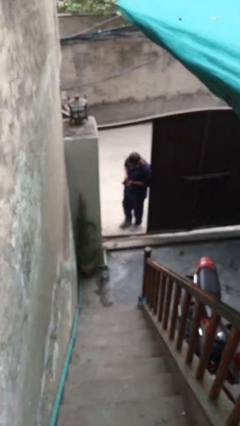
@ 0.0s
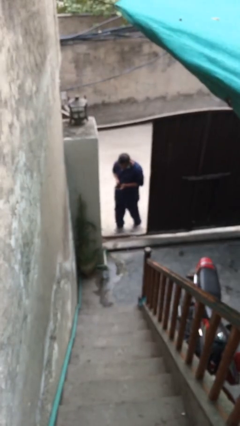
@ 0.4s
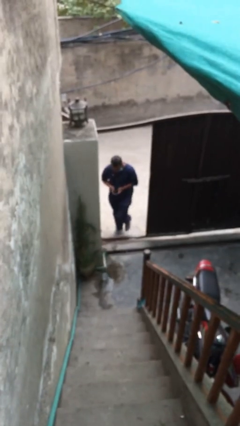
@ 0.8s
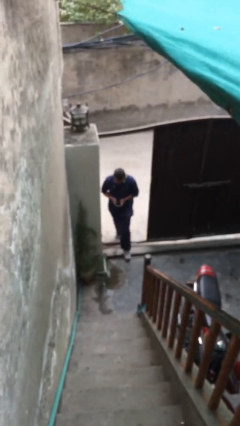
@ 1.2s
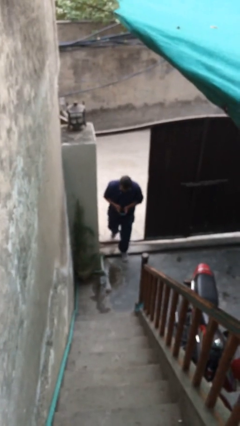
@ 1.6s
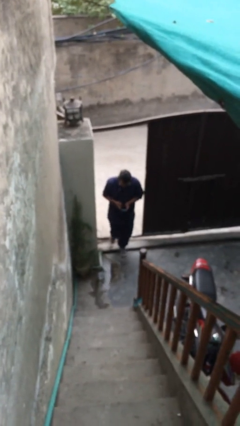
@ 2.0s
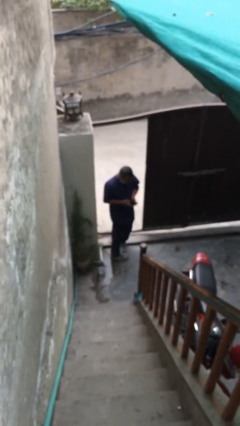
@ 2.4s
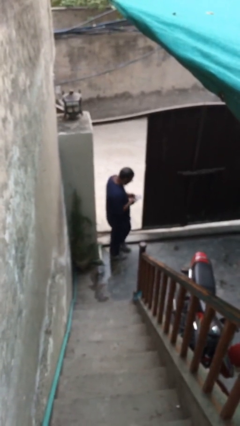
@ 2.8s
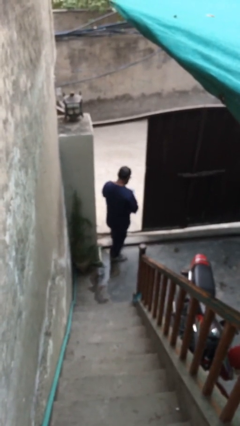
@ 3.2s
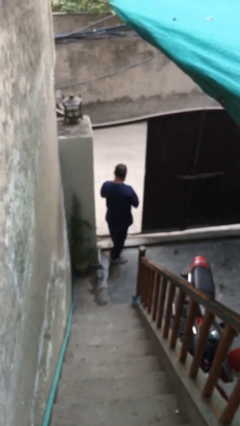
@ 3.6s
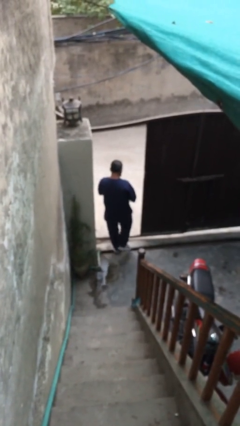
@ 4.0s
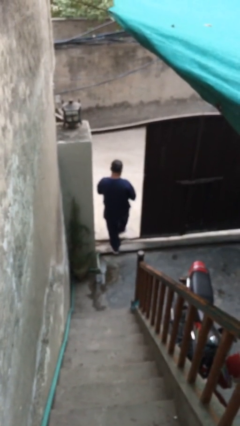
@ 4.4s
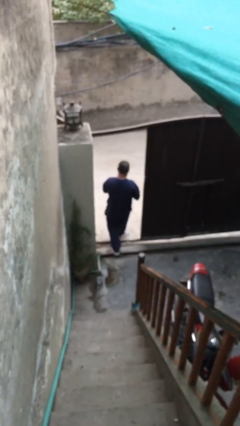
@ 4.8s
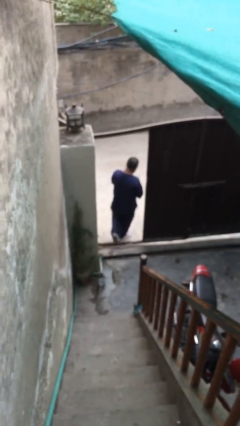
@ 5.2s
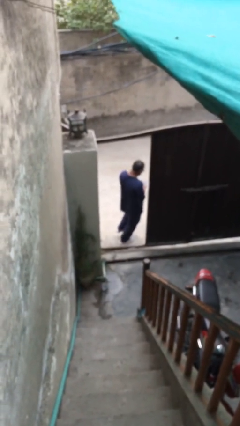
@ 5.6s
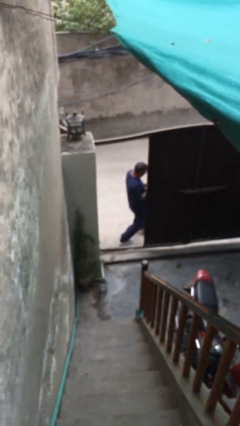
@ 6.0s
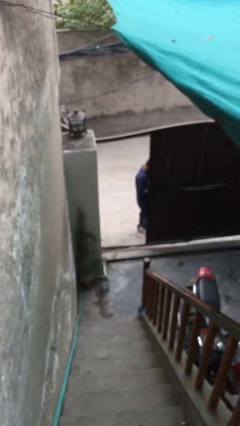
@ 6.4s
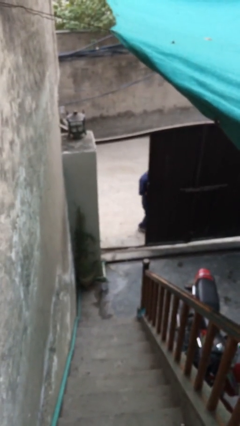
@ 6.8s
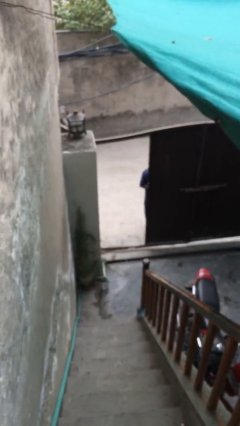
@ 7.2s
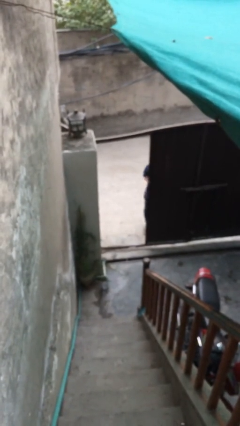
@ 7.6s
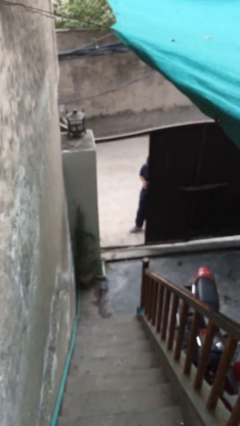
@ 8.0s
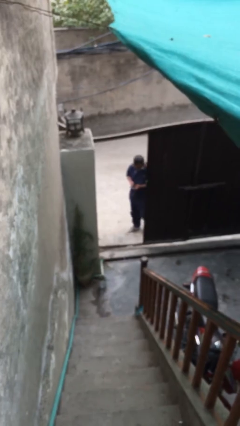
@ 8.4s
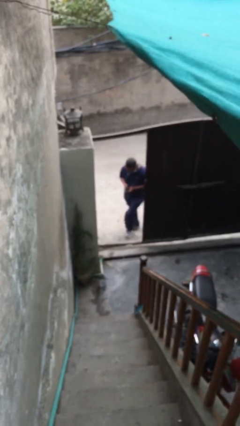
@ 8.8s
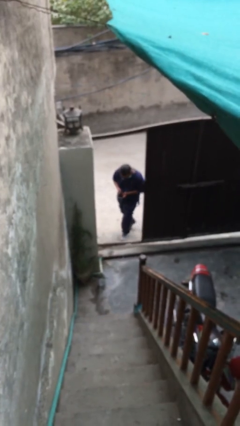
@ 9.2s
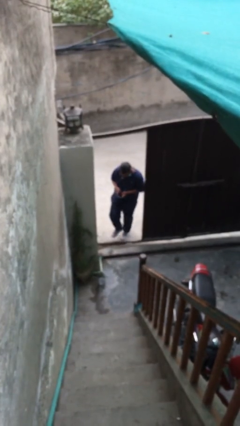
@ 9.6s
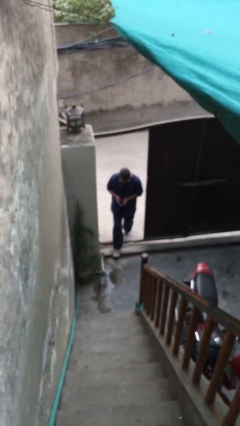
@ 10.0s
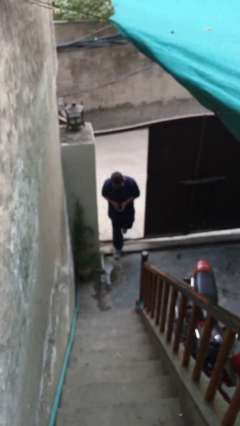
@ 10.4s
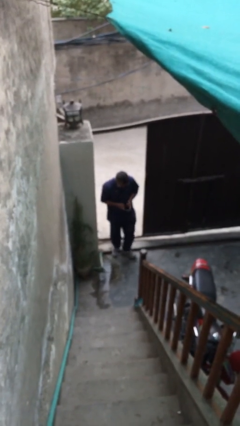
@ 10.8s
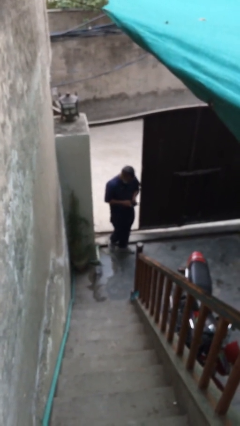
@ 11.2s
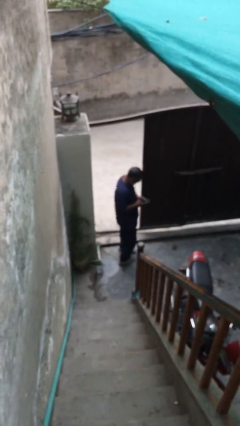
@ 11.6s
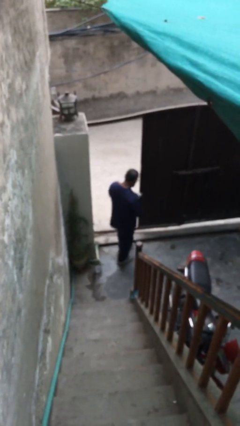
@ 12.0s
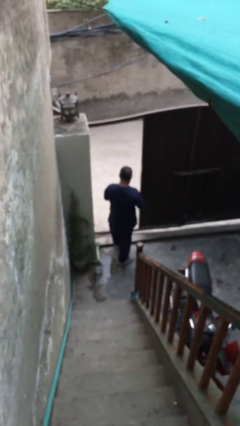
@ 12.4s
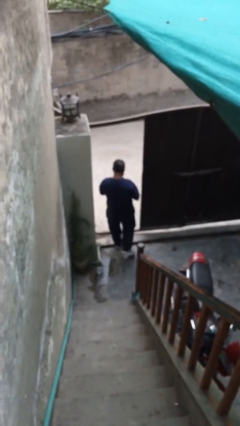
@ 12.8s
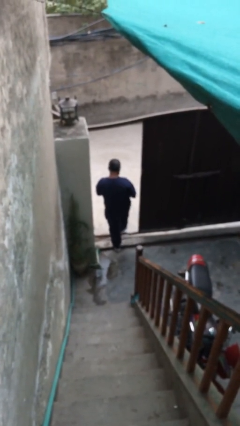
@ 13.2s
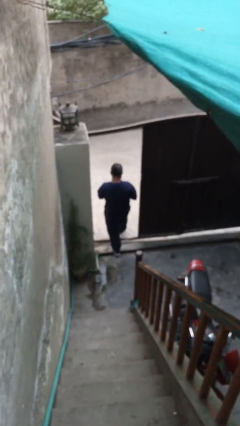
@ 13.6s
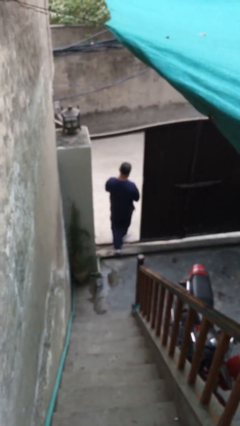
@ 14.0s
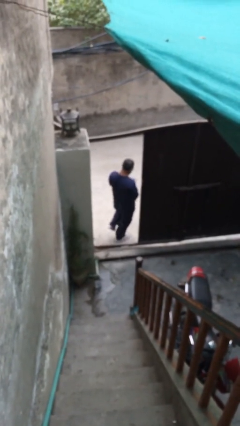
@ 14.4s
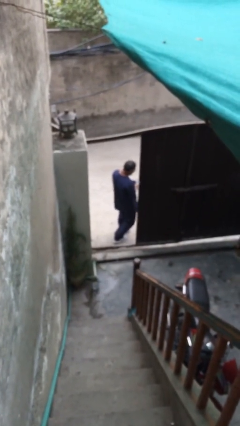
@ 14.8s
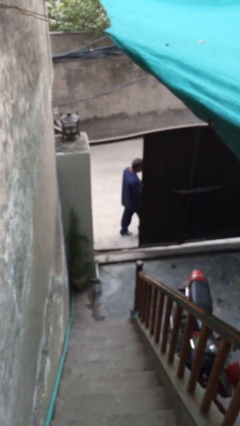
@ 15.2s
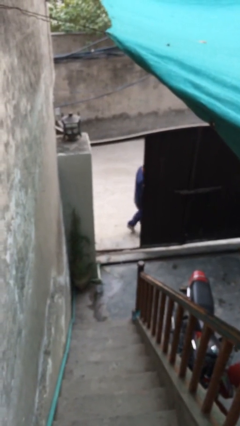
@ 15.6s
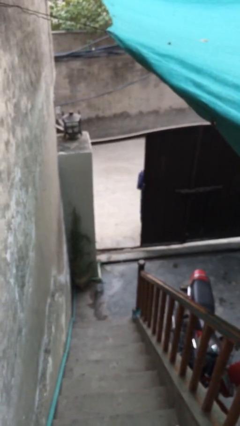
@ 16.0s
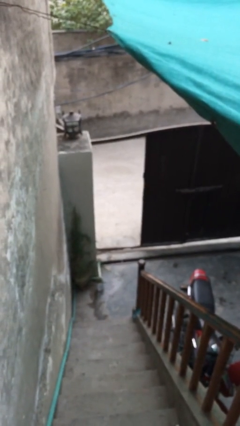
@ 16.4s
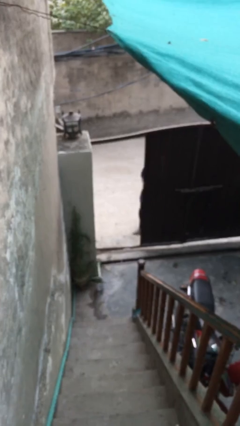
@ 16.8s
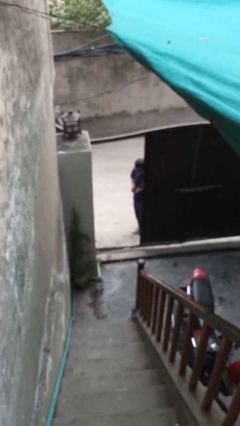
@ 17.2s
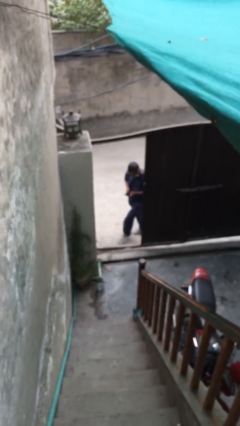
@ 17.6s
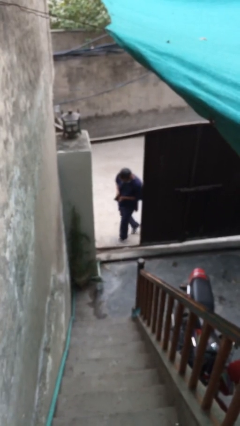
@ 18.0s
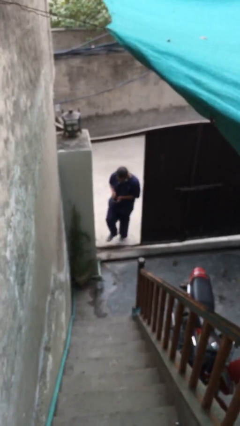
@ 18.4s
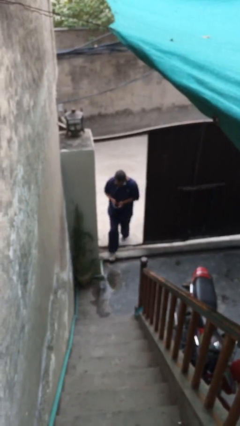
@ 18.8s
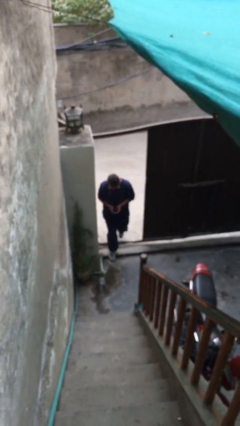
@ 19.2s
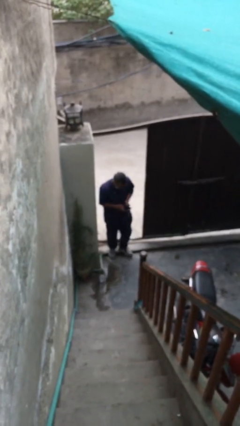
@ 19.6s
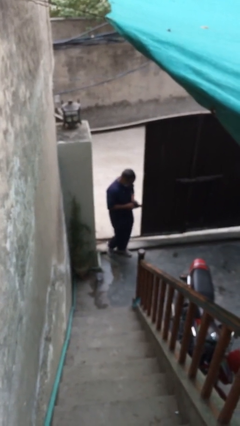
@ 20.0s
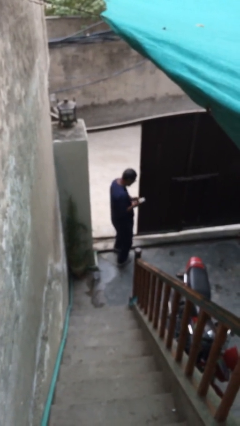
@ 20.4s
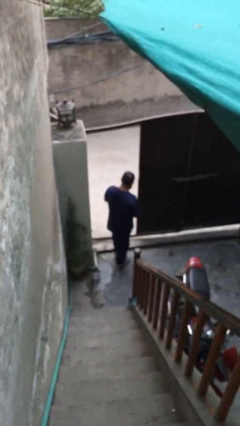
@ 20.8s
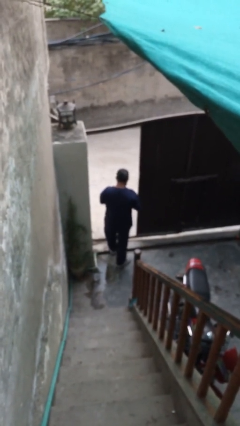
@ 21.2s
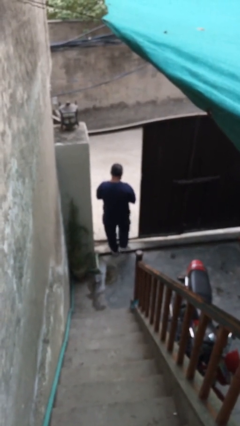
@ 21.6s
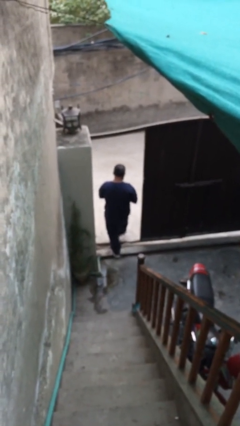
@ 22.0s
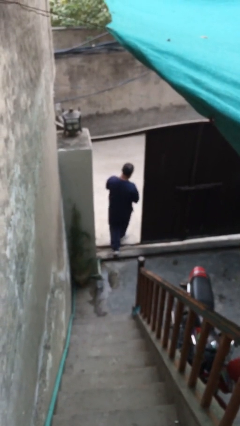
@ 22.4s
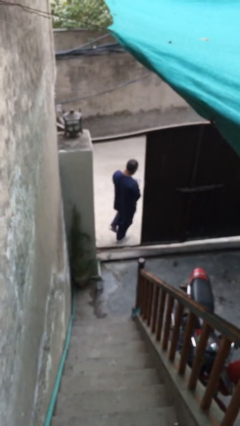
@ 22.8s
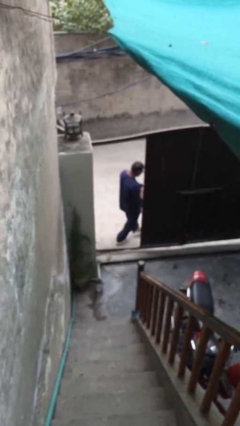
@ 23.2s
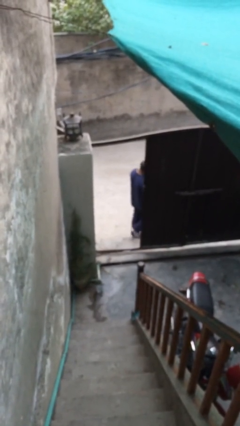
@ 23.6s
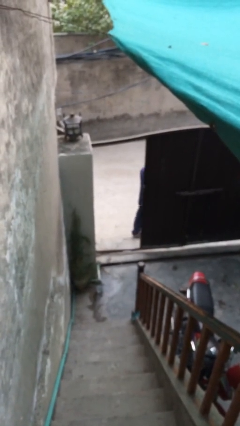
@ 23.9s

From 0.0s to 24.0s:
person texts on phone

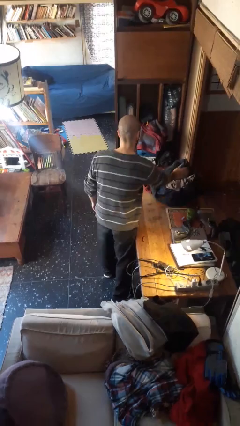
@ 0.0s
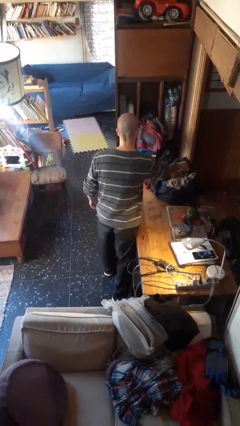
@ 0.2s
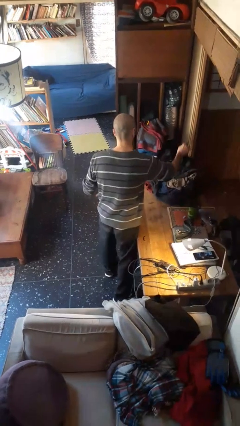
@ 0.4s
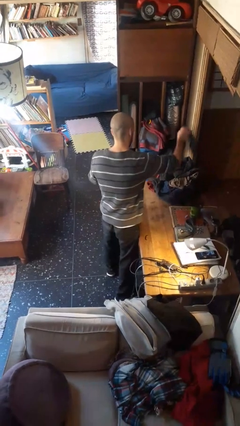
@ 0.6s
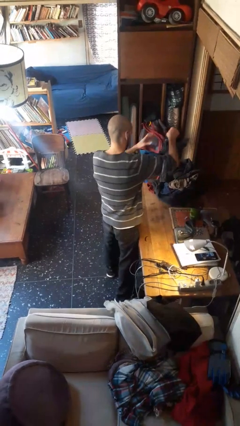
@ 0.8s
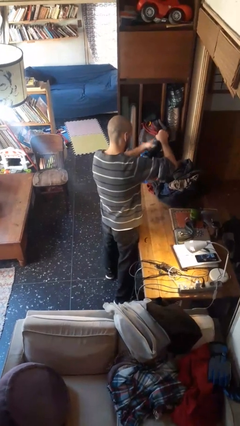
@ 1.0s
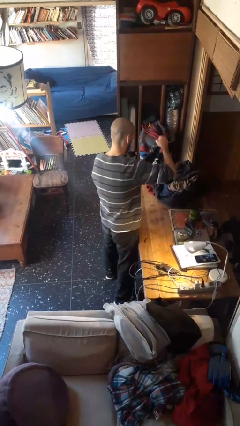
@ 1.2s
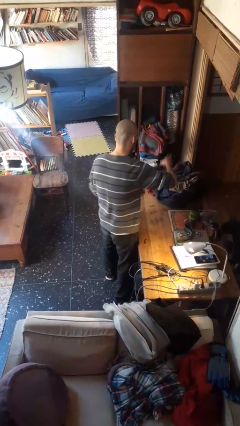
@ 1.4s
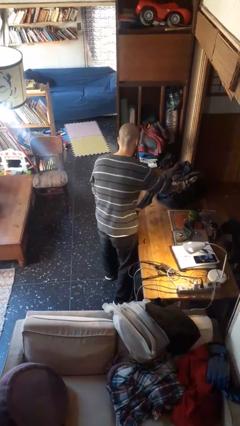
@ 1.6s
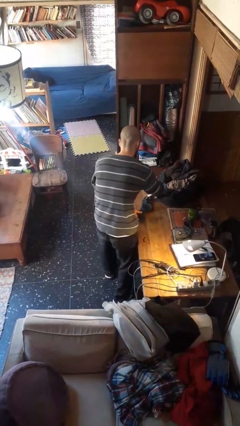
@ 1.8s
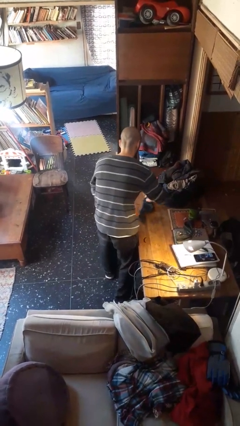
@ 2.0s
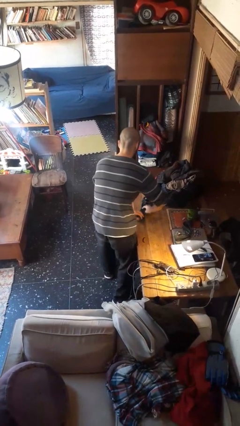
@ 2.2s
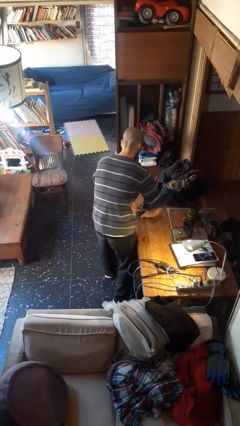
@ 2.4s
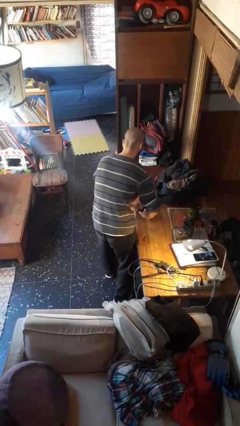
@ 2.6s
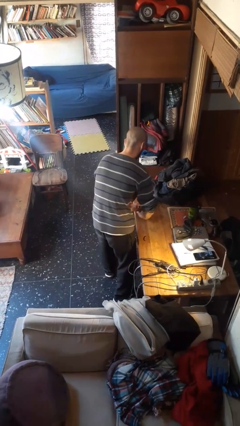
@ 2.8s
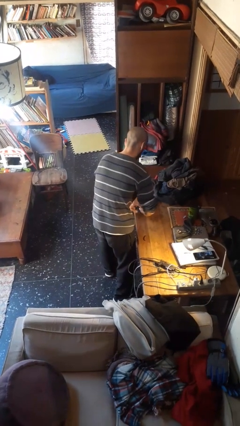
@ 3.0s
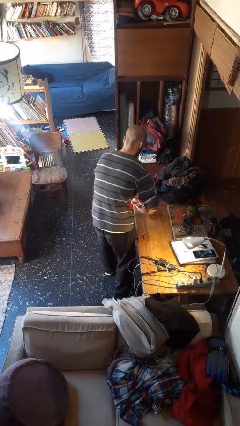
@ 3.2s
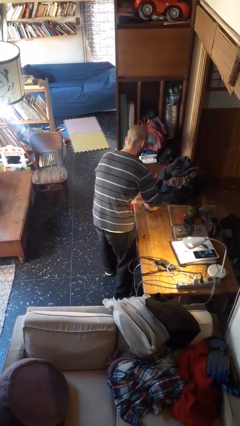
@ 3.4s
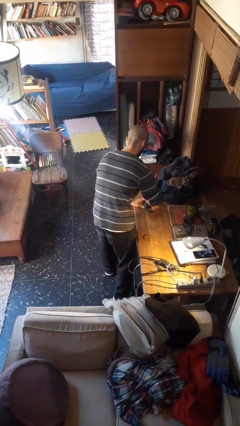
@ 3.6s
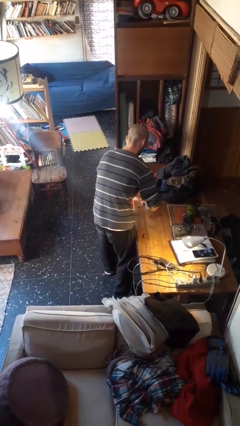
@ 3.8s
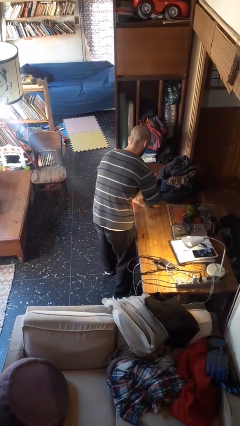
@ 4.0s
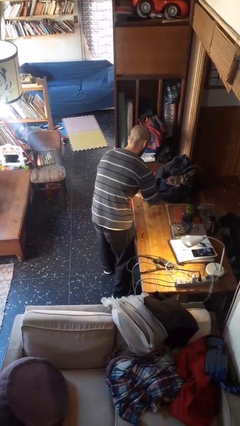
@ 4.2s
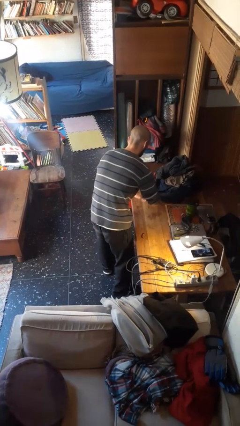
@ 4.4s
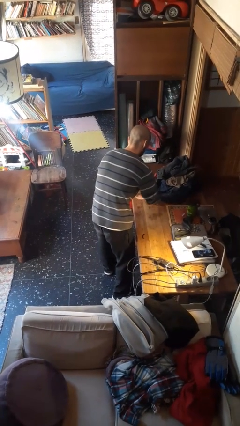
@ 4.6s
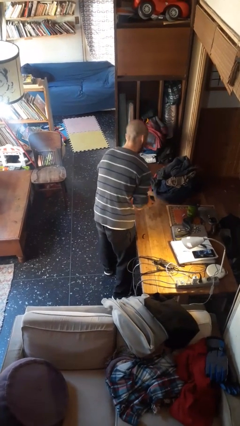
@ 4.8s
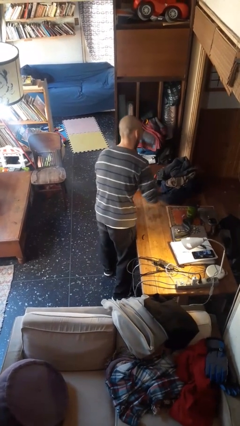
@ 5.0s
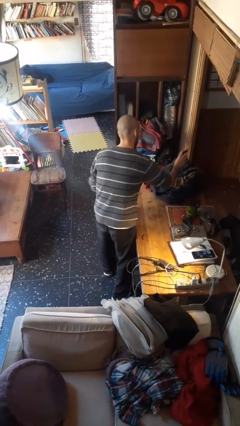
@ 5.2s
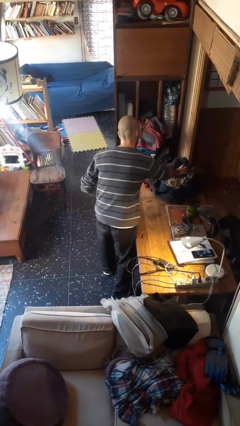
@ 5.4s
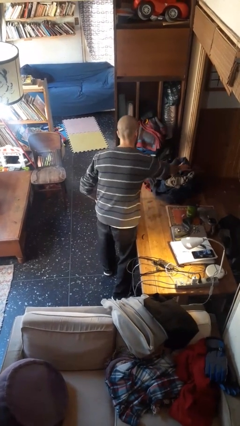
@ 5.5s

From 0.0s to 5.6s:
person folds socks

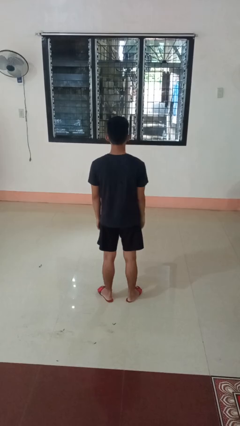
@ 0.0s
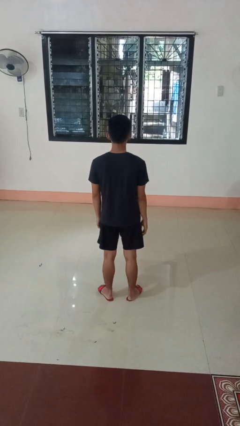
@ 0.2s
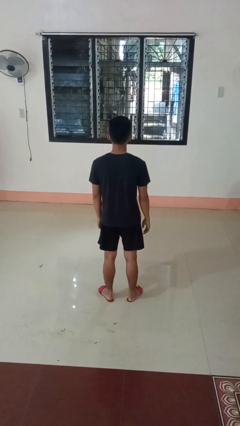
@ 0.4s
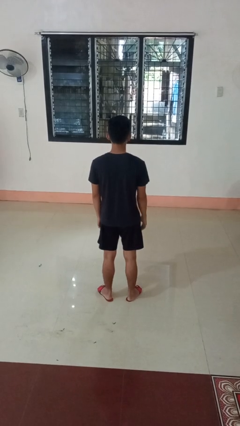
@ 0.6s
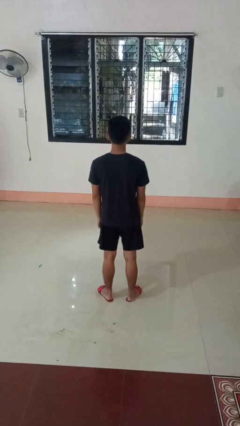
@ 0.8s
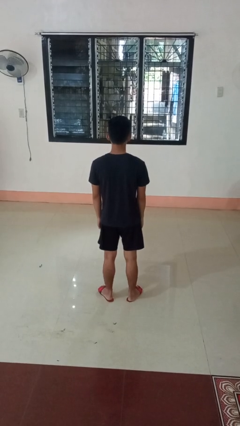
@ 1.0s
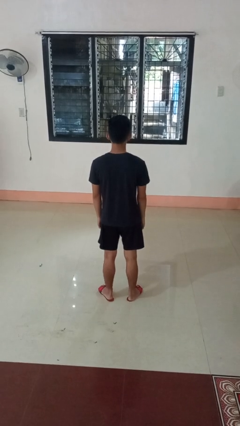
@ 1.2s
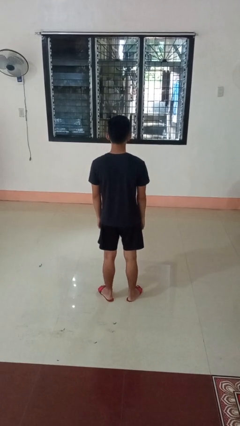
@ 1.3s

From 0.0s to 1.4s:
person gestures lower hand
